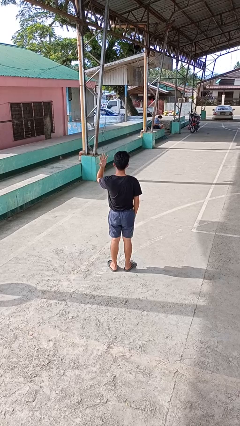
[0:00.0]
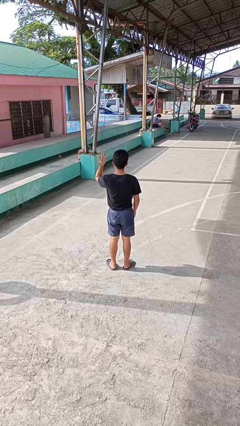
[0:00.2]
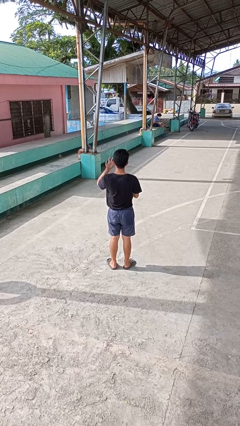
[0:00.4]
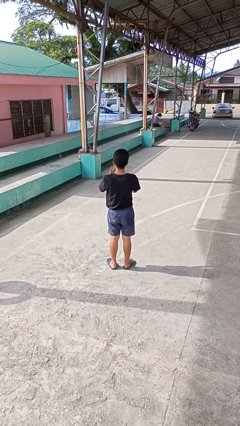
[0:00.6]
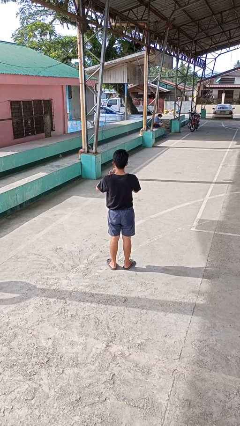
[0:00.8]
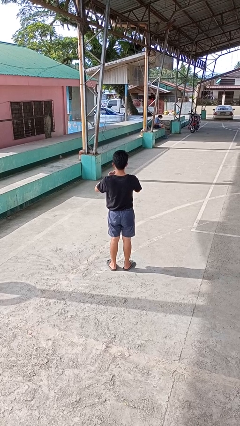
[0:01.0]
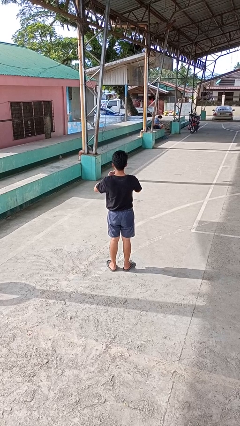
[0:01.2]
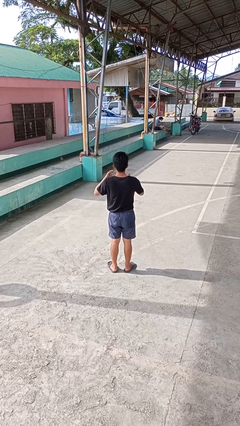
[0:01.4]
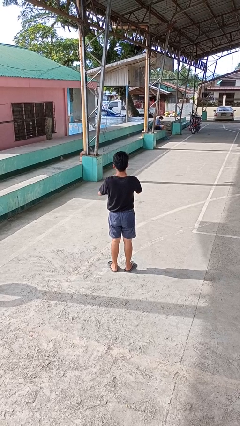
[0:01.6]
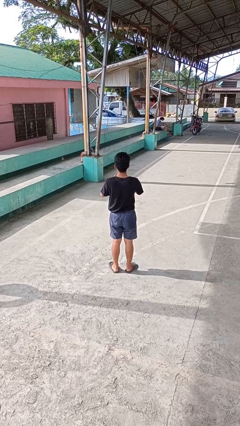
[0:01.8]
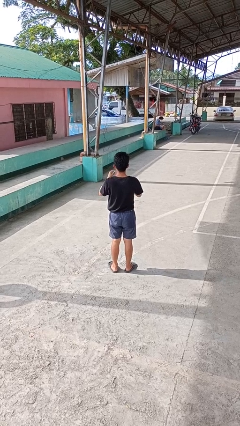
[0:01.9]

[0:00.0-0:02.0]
person takes off ring

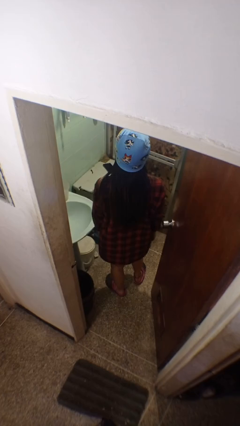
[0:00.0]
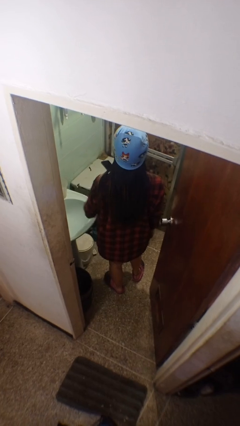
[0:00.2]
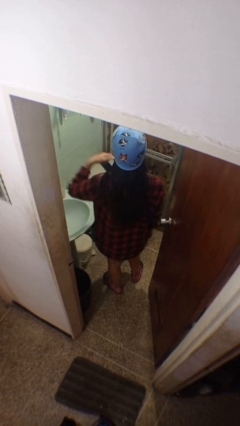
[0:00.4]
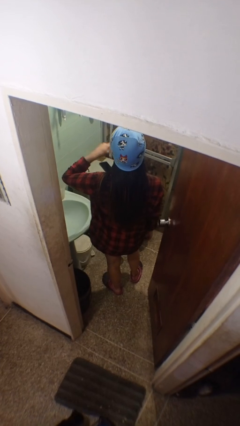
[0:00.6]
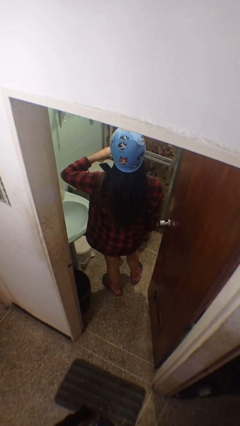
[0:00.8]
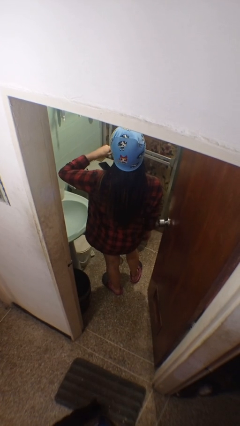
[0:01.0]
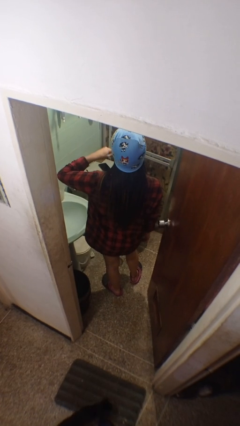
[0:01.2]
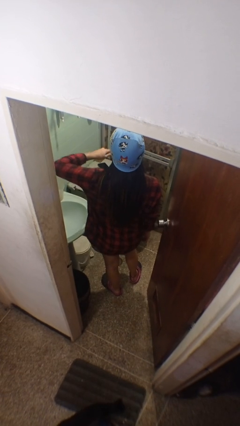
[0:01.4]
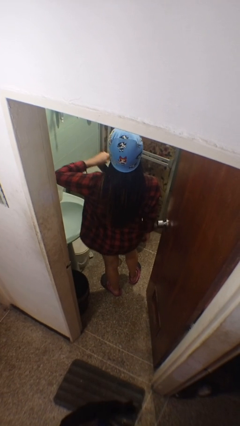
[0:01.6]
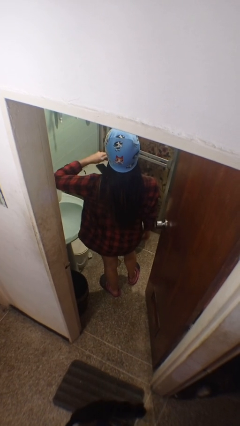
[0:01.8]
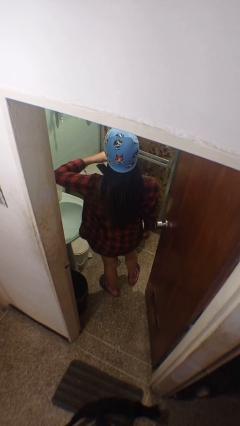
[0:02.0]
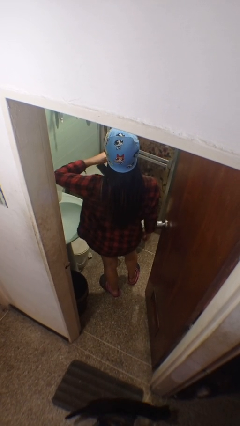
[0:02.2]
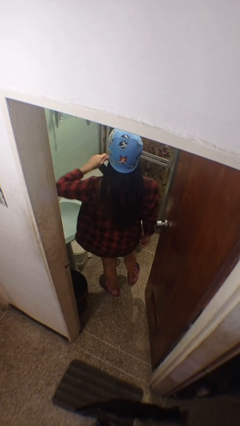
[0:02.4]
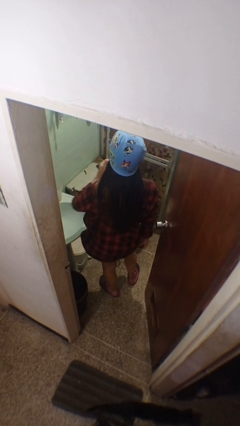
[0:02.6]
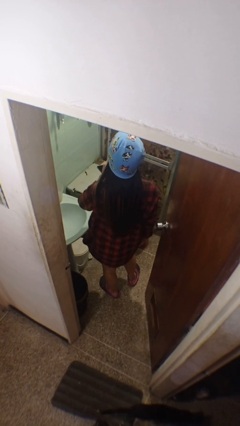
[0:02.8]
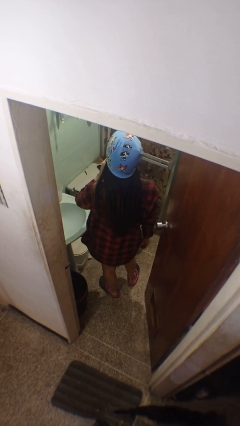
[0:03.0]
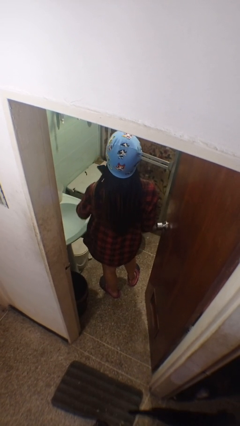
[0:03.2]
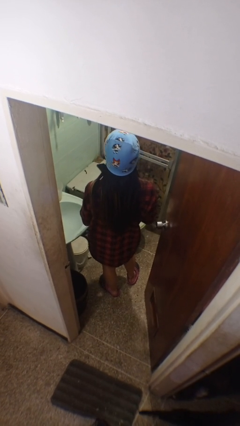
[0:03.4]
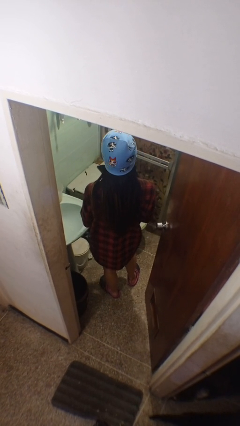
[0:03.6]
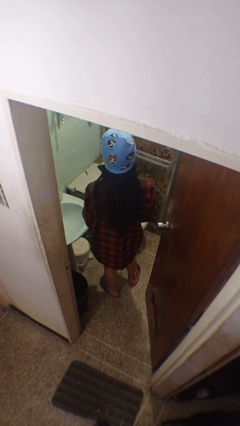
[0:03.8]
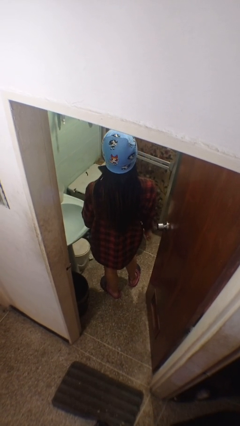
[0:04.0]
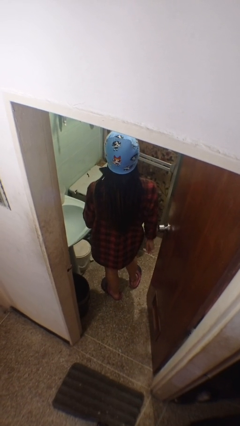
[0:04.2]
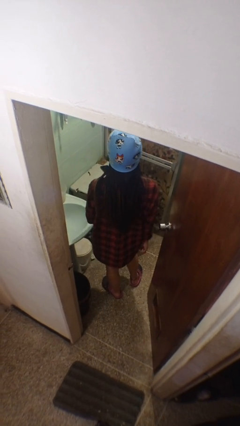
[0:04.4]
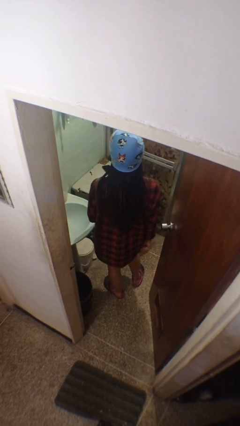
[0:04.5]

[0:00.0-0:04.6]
person brushes teeth

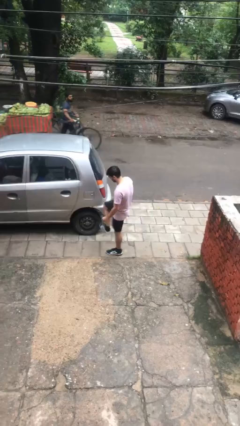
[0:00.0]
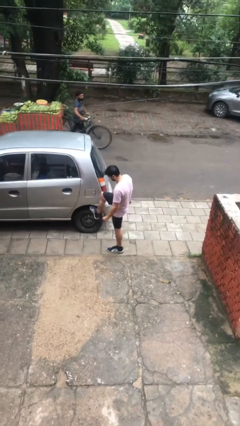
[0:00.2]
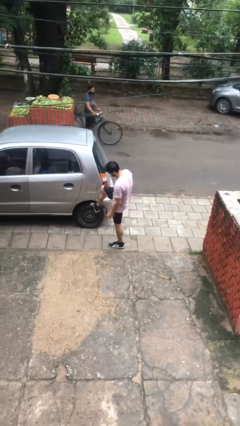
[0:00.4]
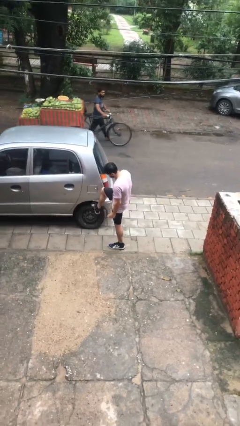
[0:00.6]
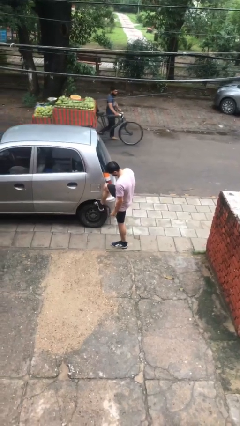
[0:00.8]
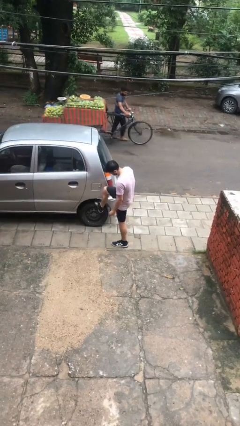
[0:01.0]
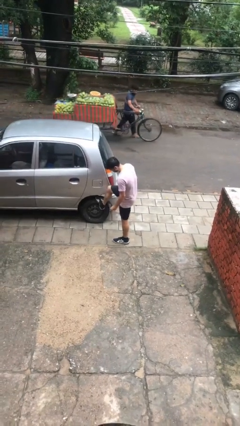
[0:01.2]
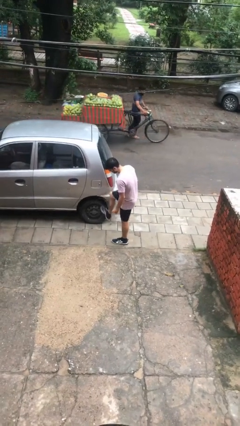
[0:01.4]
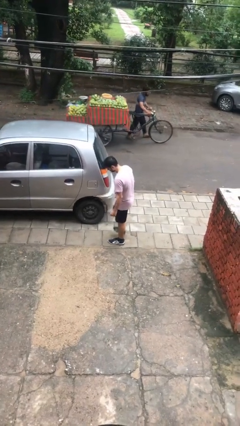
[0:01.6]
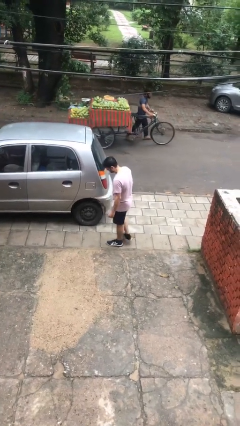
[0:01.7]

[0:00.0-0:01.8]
person kicks car tires

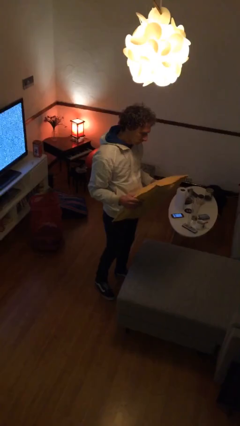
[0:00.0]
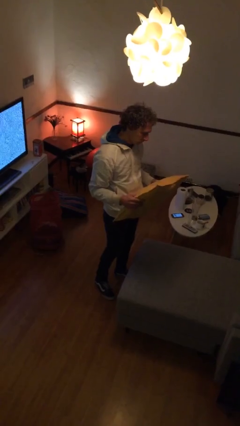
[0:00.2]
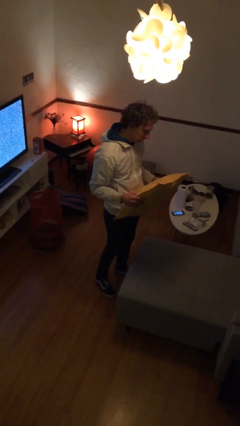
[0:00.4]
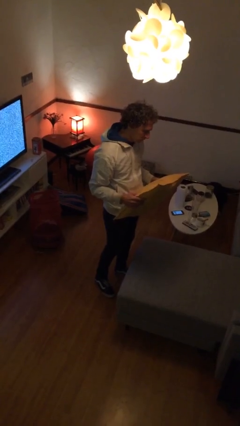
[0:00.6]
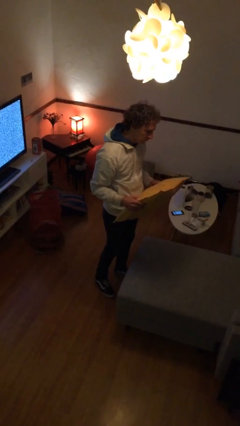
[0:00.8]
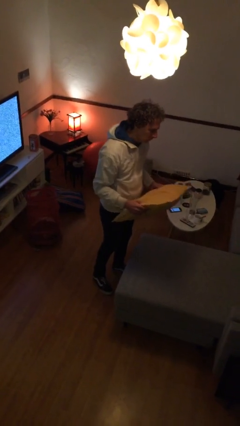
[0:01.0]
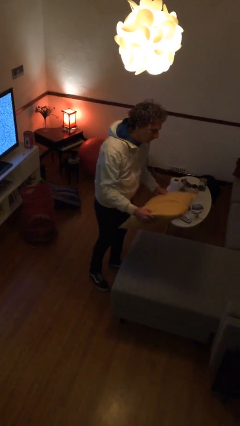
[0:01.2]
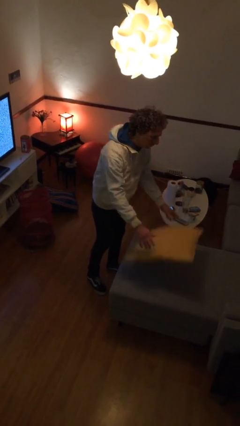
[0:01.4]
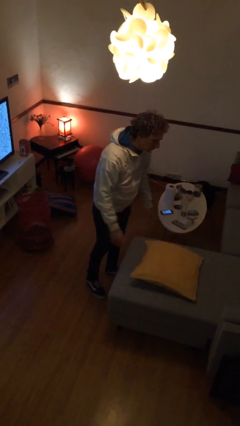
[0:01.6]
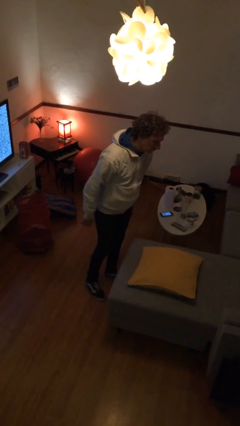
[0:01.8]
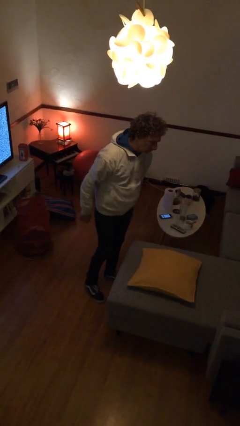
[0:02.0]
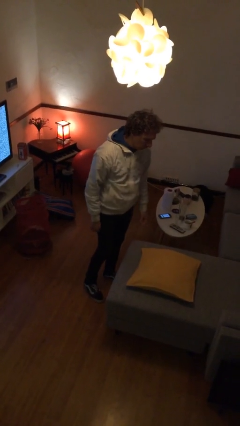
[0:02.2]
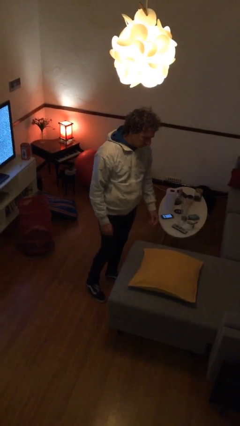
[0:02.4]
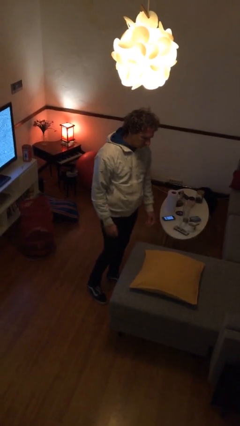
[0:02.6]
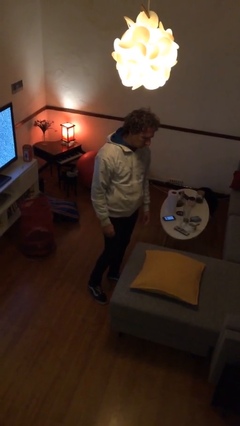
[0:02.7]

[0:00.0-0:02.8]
person puts down object on couch

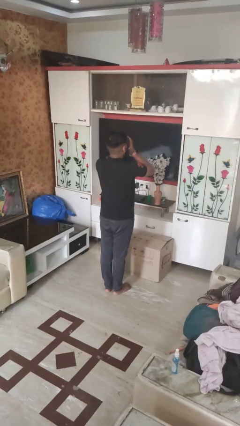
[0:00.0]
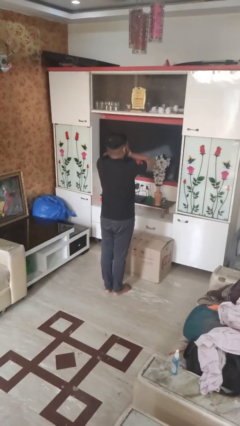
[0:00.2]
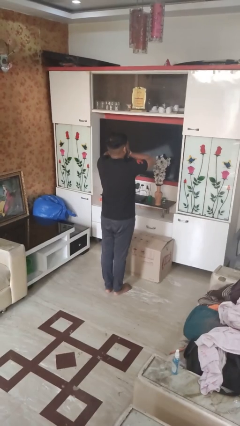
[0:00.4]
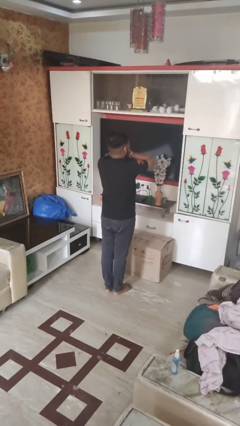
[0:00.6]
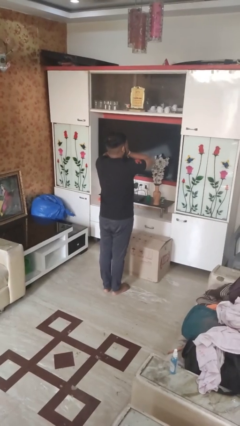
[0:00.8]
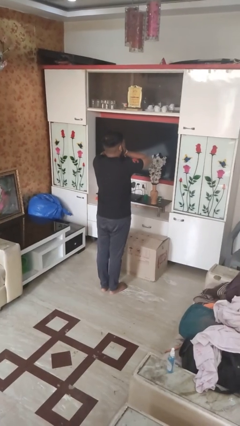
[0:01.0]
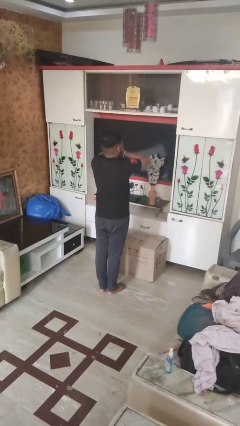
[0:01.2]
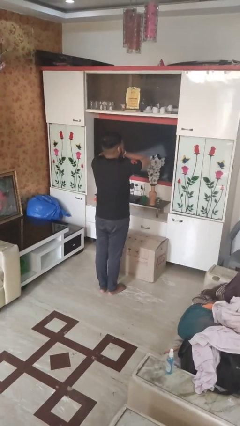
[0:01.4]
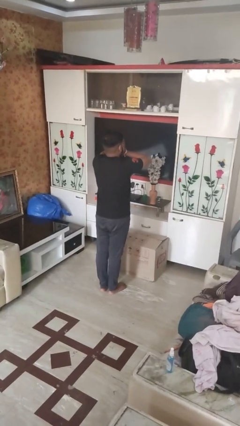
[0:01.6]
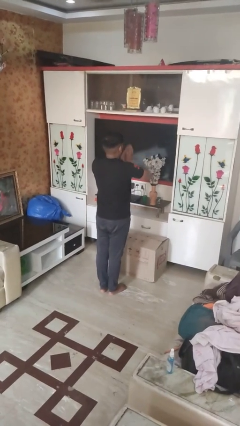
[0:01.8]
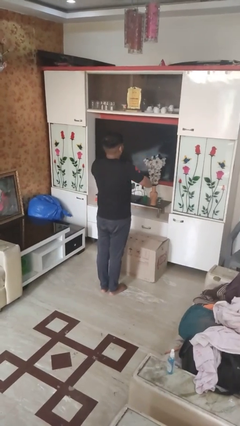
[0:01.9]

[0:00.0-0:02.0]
person covers face with hands

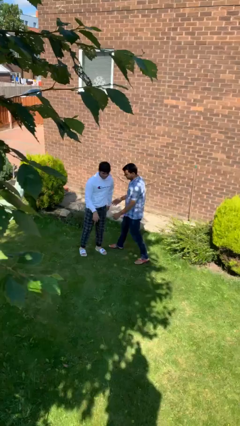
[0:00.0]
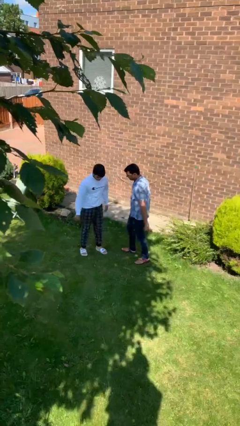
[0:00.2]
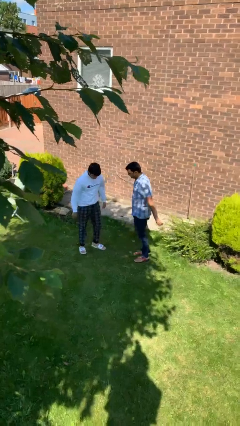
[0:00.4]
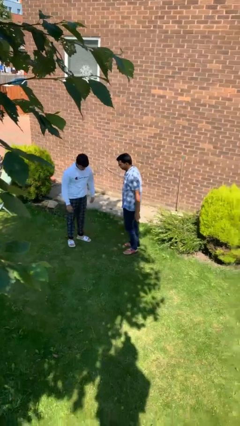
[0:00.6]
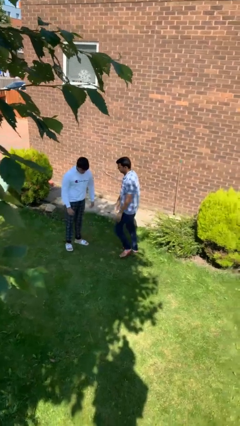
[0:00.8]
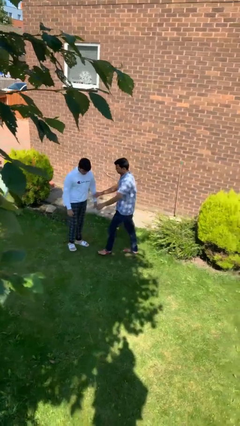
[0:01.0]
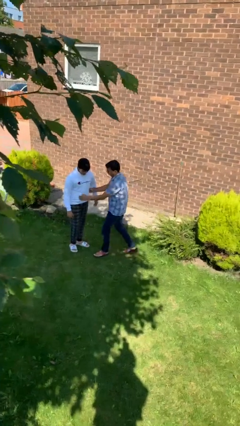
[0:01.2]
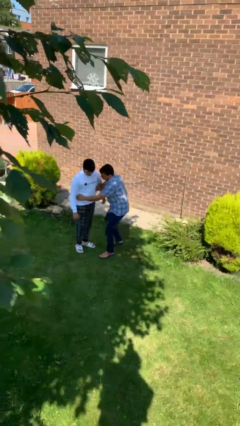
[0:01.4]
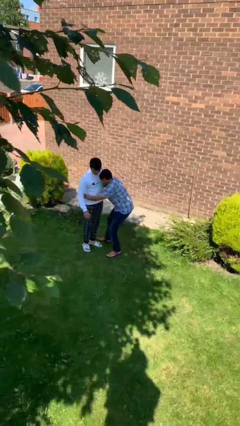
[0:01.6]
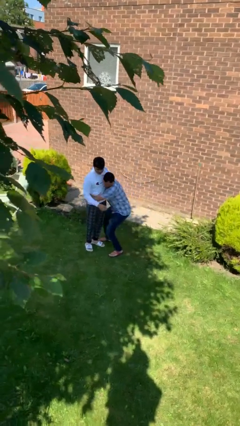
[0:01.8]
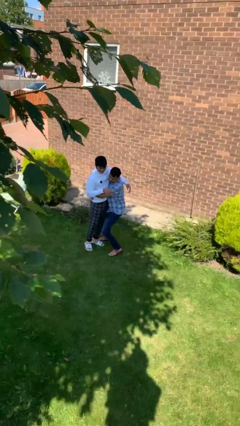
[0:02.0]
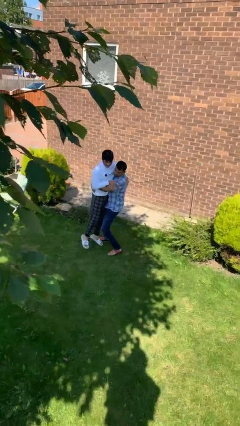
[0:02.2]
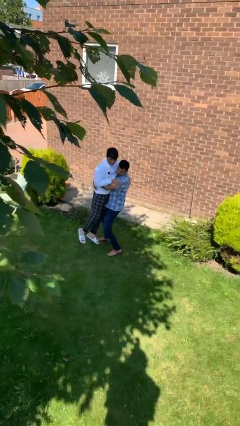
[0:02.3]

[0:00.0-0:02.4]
person picks up person

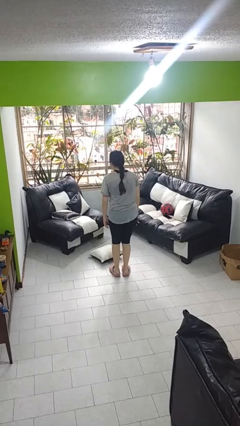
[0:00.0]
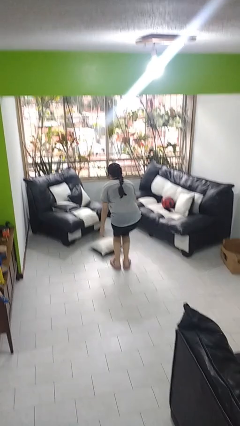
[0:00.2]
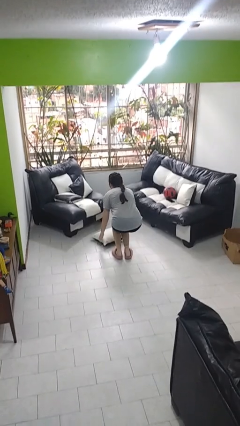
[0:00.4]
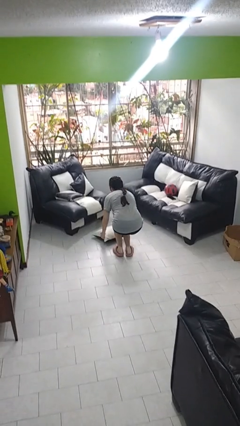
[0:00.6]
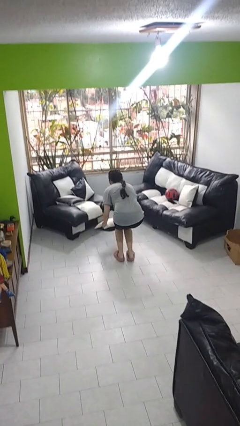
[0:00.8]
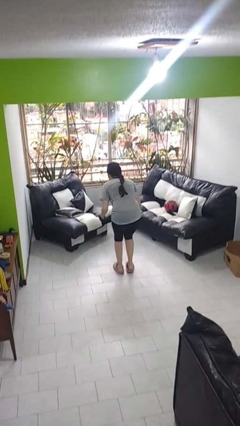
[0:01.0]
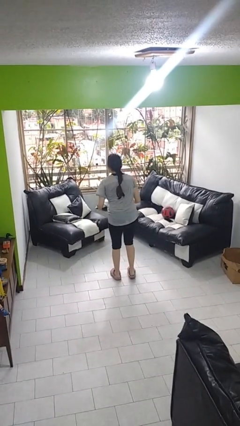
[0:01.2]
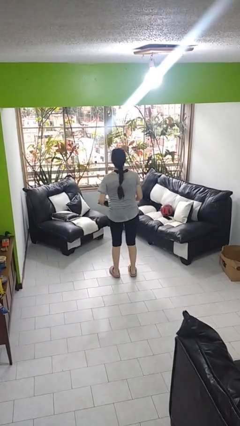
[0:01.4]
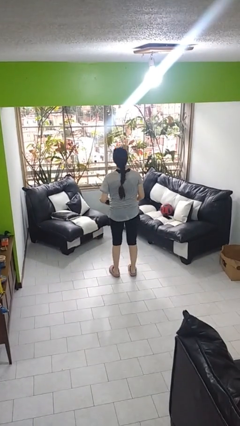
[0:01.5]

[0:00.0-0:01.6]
person picks up object from floor
